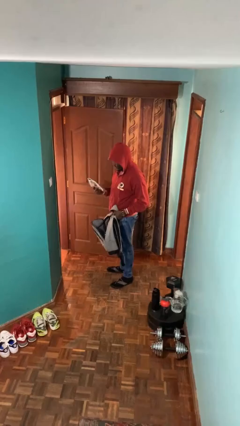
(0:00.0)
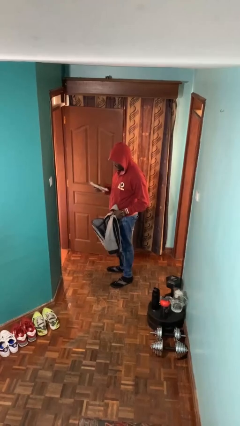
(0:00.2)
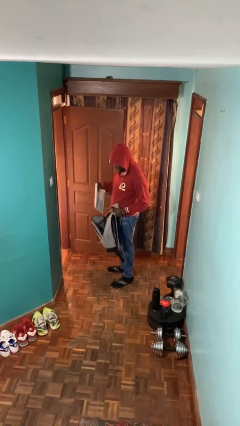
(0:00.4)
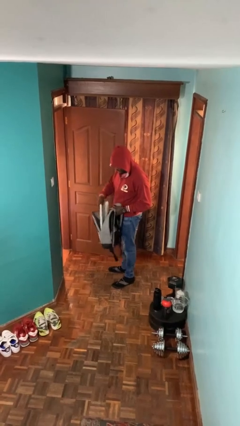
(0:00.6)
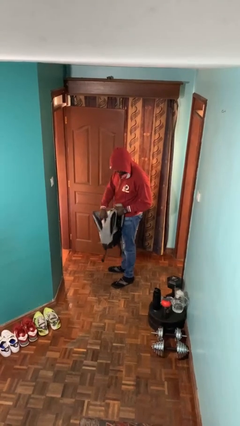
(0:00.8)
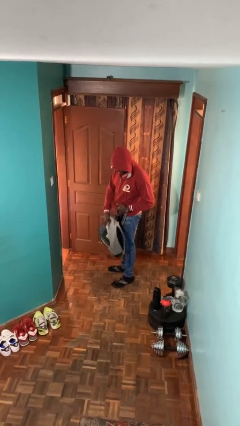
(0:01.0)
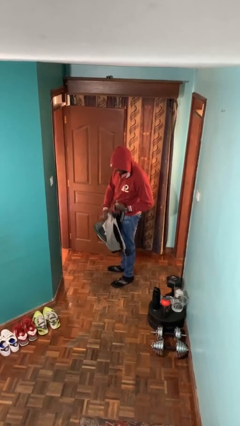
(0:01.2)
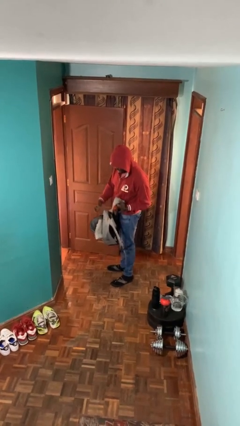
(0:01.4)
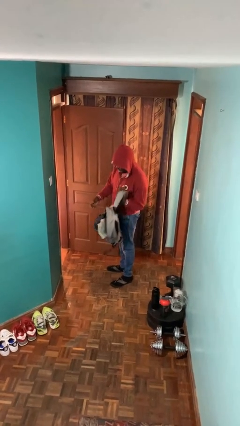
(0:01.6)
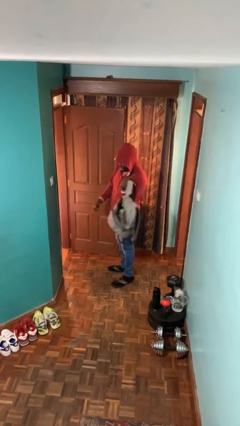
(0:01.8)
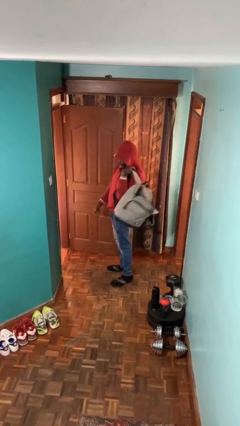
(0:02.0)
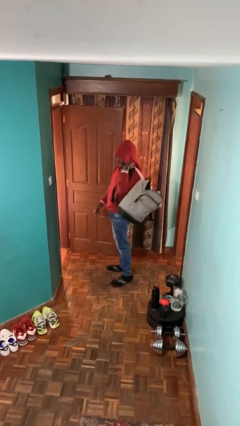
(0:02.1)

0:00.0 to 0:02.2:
person puts object into backpack

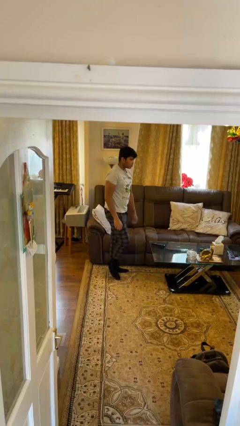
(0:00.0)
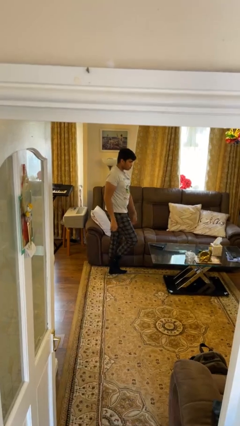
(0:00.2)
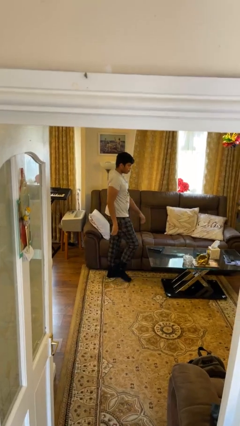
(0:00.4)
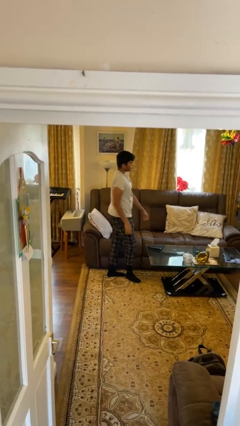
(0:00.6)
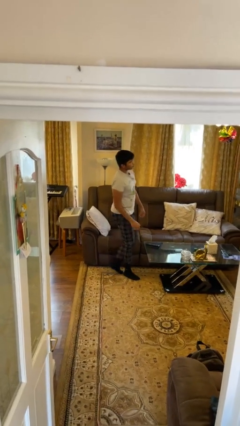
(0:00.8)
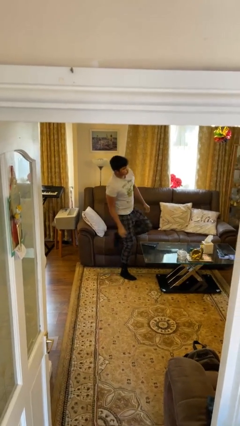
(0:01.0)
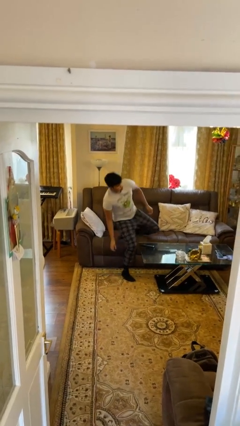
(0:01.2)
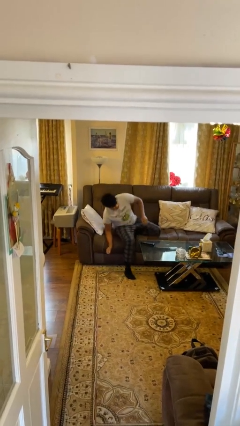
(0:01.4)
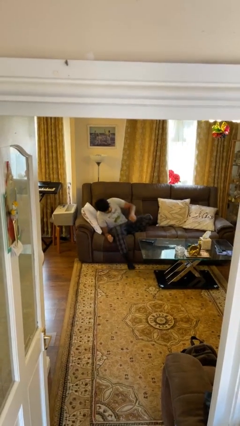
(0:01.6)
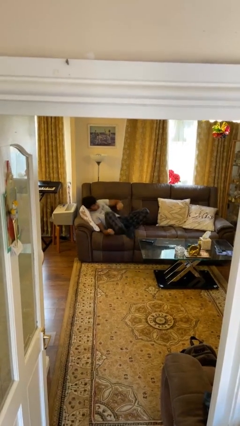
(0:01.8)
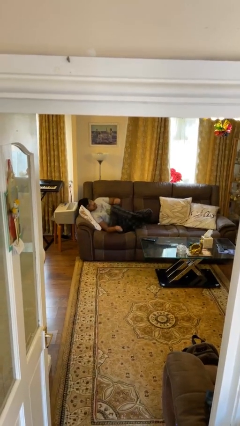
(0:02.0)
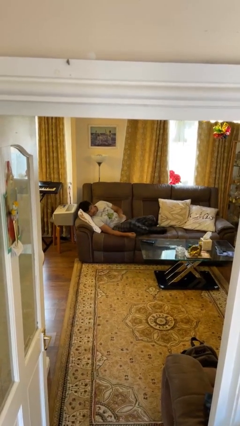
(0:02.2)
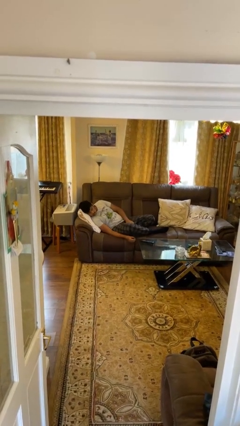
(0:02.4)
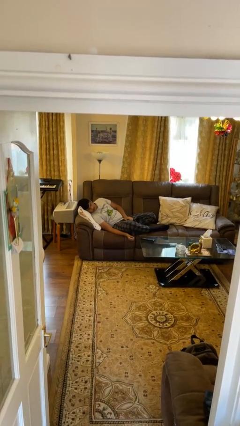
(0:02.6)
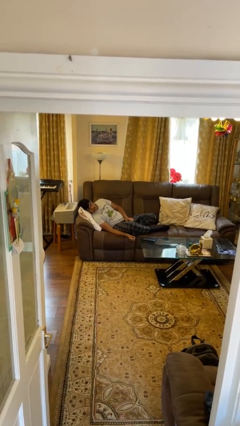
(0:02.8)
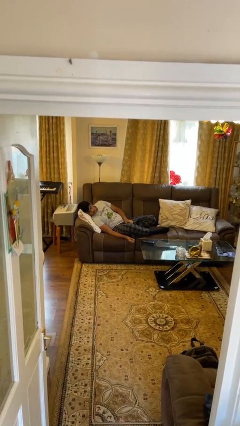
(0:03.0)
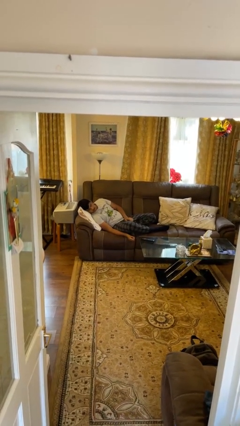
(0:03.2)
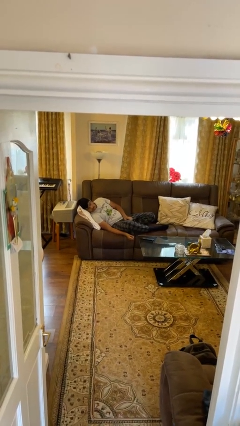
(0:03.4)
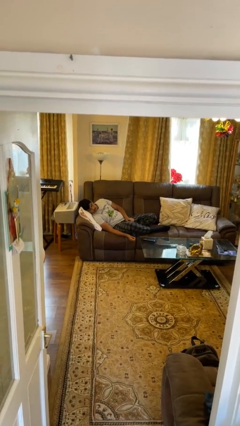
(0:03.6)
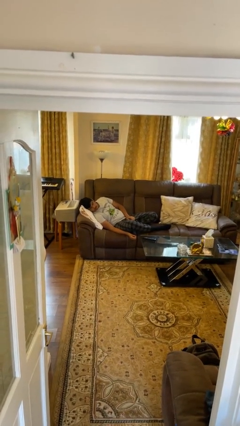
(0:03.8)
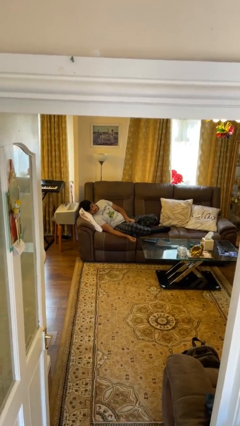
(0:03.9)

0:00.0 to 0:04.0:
person lies down on couch

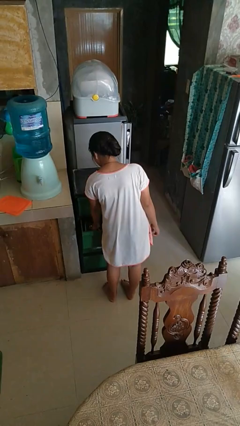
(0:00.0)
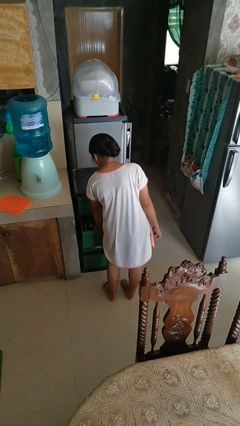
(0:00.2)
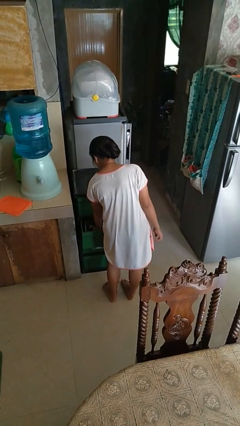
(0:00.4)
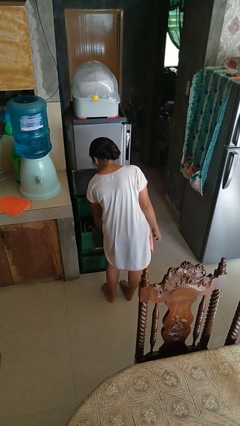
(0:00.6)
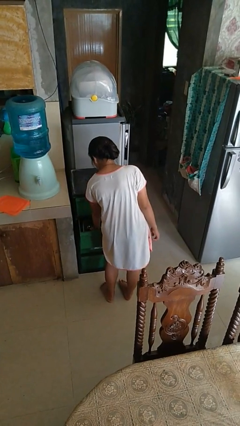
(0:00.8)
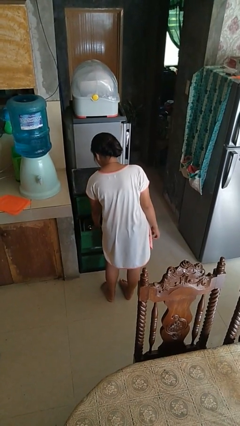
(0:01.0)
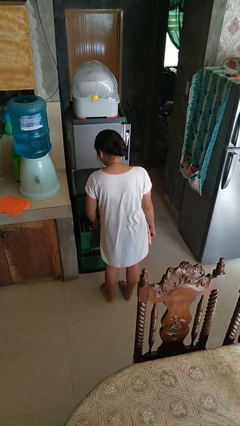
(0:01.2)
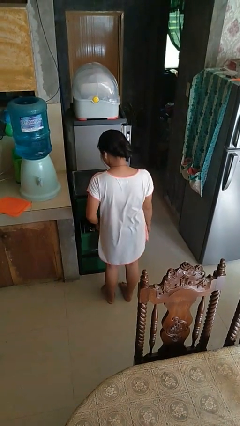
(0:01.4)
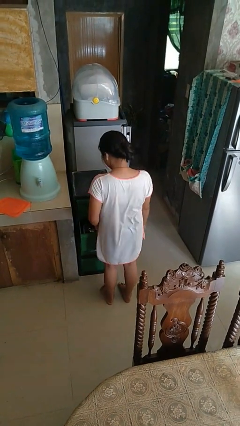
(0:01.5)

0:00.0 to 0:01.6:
person puts object into kitchen drawer

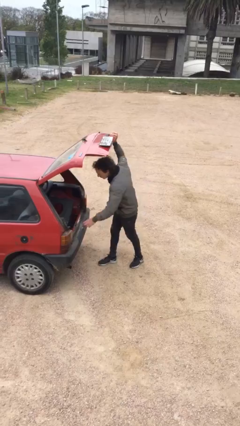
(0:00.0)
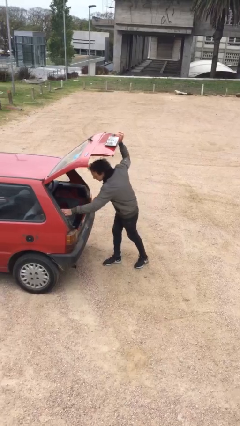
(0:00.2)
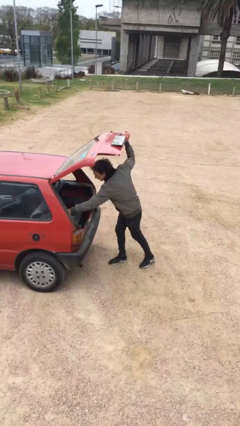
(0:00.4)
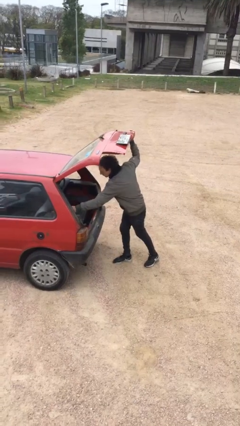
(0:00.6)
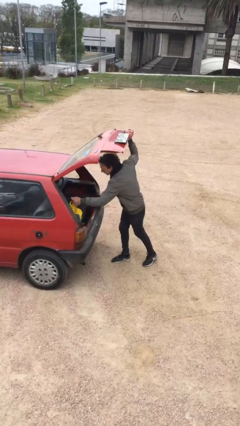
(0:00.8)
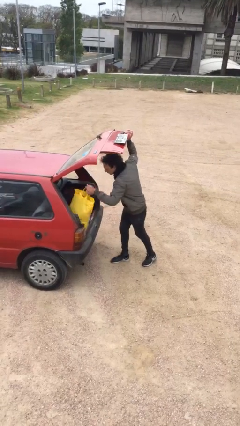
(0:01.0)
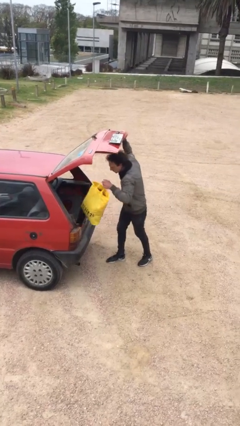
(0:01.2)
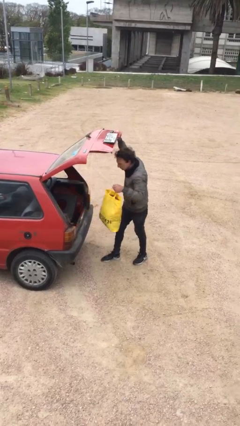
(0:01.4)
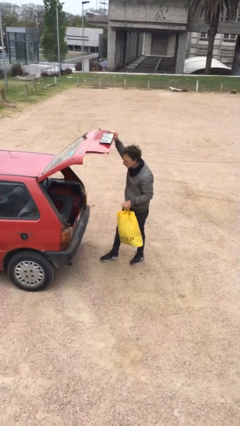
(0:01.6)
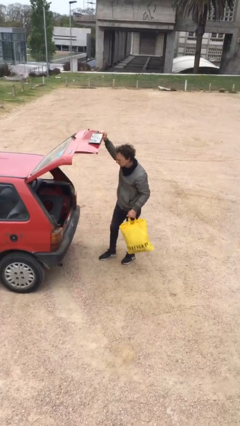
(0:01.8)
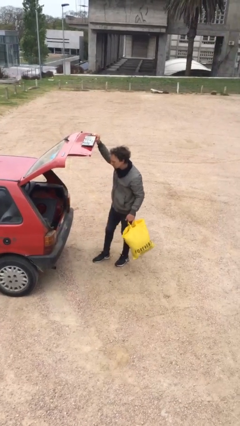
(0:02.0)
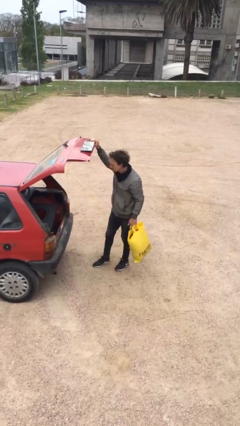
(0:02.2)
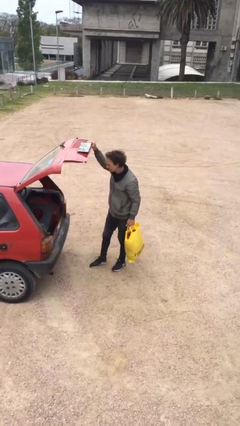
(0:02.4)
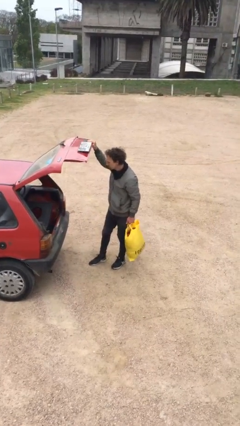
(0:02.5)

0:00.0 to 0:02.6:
person unloads car

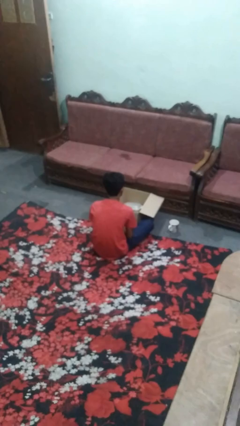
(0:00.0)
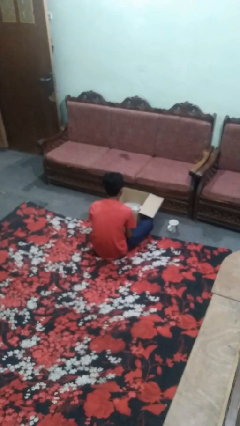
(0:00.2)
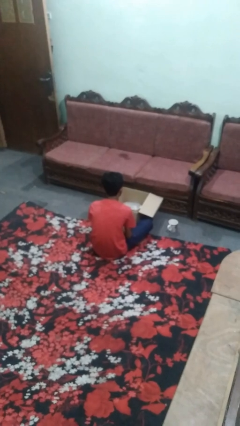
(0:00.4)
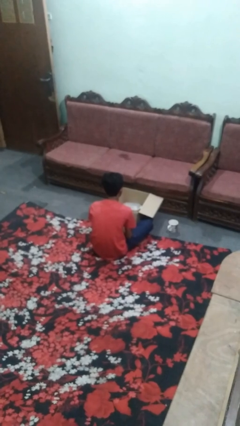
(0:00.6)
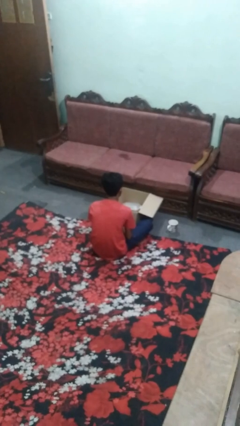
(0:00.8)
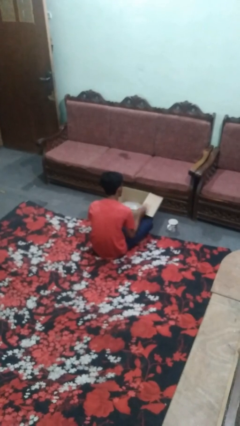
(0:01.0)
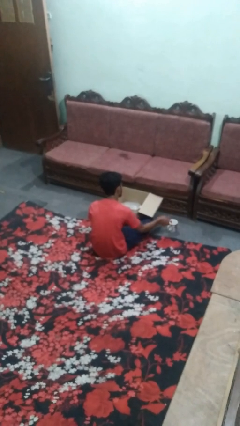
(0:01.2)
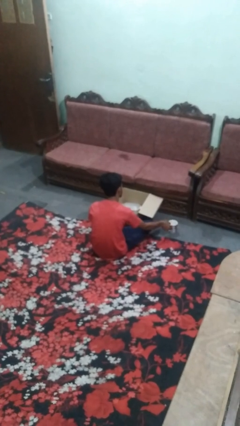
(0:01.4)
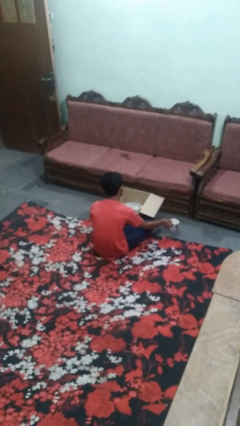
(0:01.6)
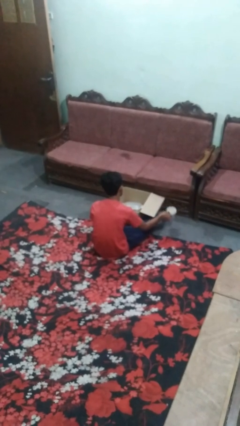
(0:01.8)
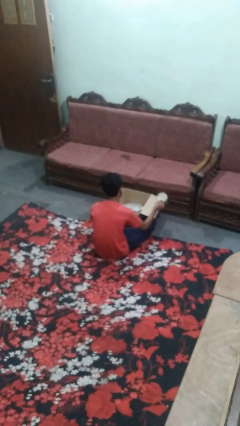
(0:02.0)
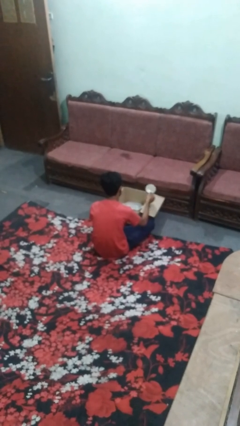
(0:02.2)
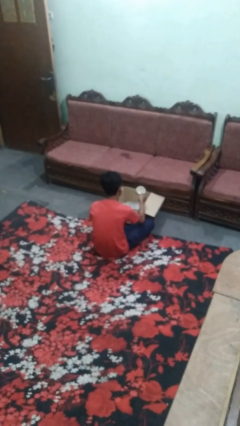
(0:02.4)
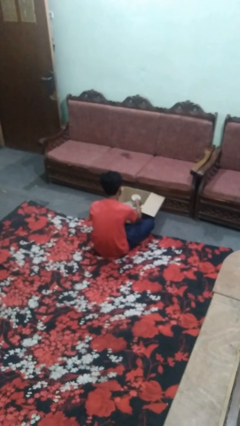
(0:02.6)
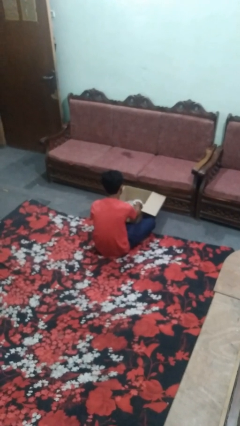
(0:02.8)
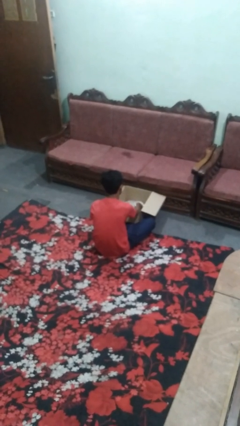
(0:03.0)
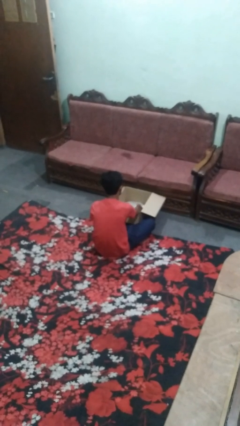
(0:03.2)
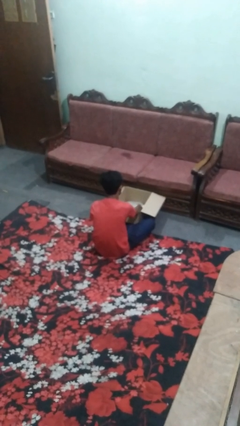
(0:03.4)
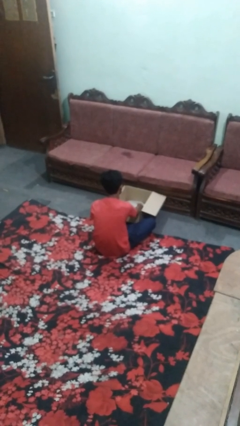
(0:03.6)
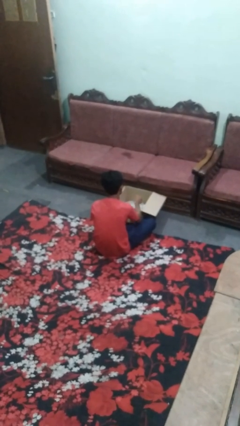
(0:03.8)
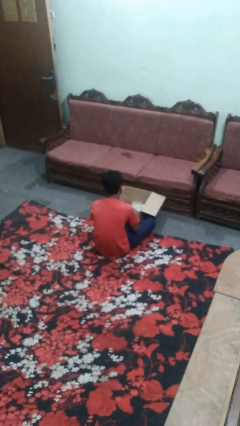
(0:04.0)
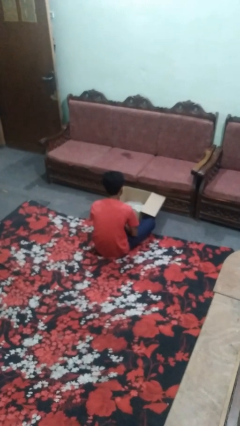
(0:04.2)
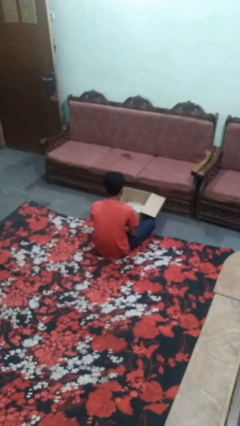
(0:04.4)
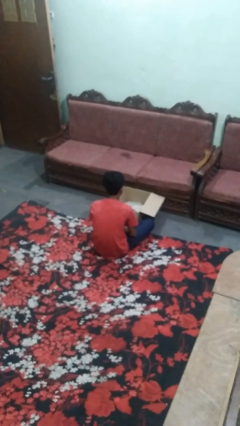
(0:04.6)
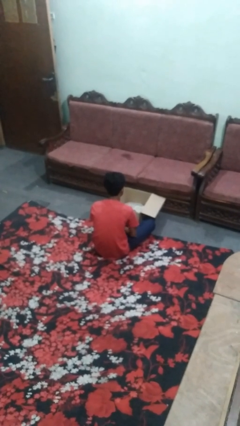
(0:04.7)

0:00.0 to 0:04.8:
person puts object into box

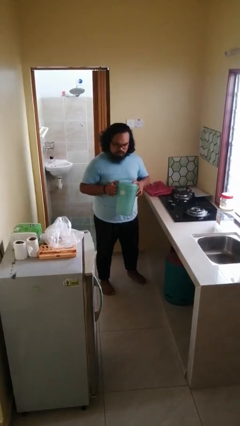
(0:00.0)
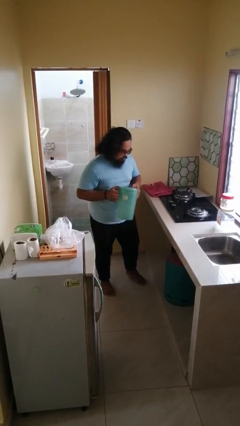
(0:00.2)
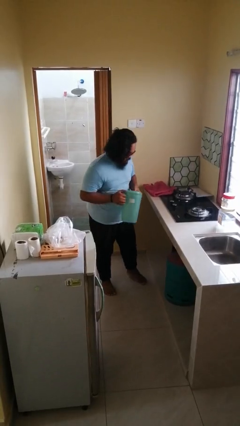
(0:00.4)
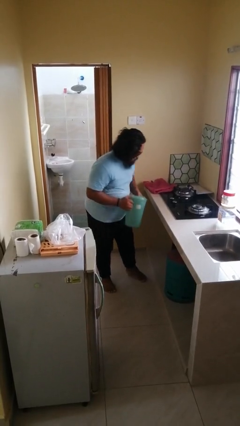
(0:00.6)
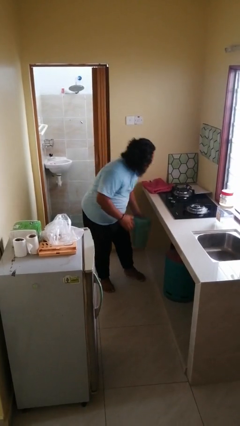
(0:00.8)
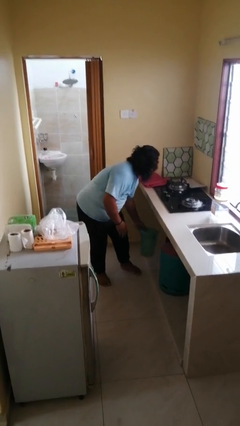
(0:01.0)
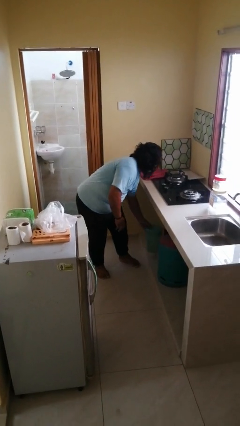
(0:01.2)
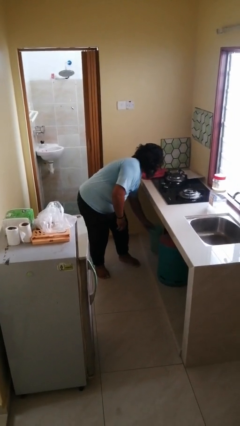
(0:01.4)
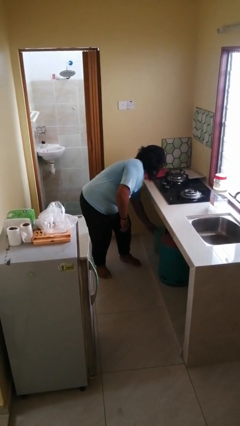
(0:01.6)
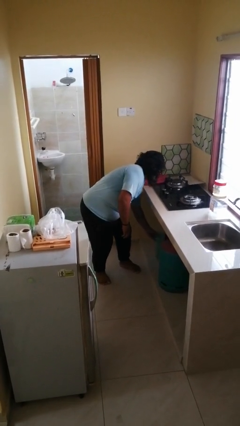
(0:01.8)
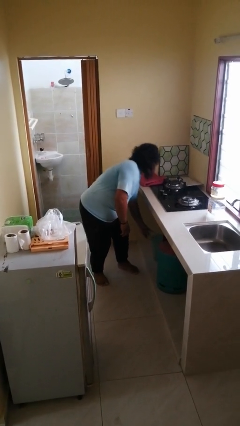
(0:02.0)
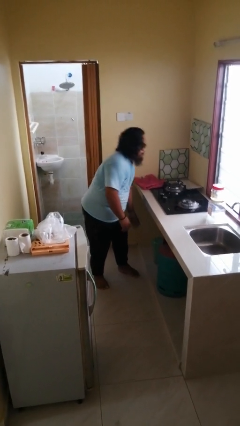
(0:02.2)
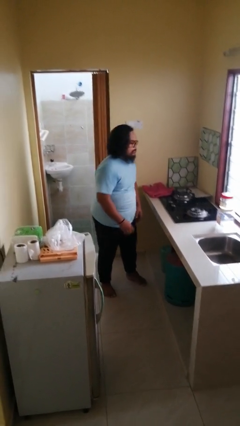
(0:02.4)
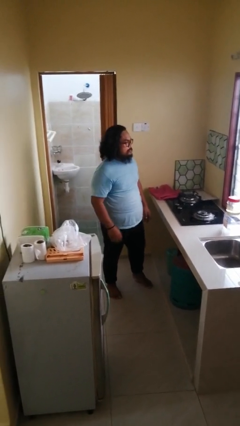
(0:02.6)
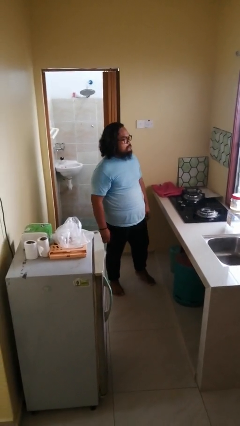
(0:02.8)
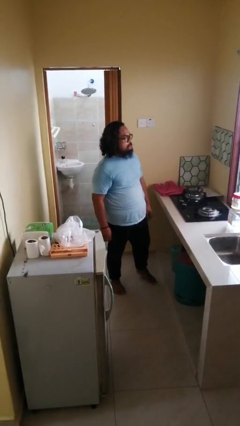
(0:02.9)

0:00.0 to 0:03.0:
person puts down object into cabinet
